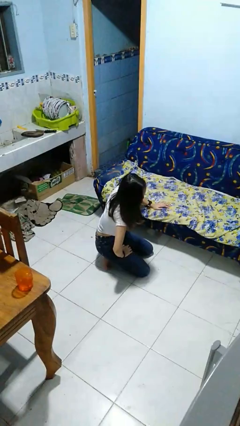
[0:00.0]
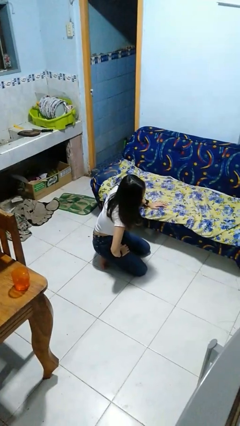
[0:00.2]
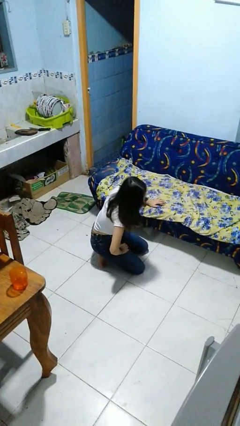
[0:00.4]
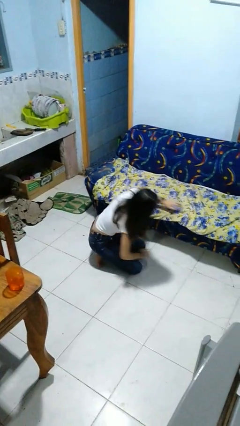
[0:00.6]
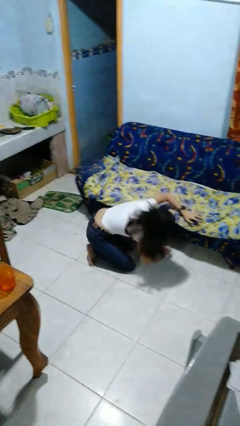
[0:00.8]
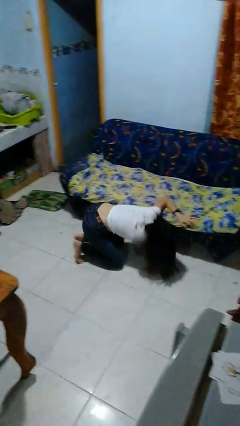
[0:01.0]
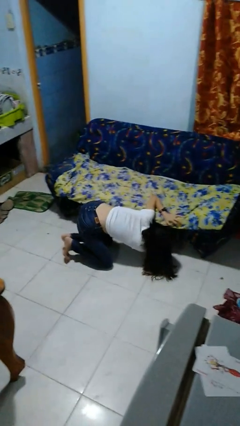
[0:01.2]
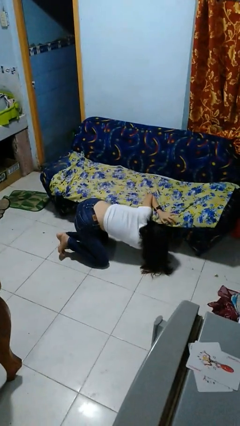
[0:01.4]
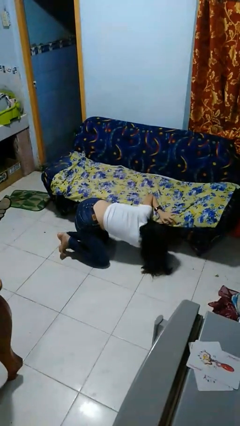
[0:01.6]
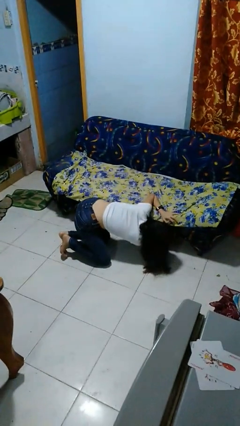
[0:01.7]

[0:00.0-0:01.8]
person searches under couch

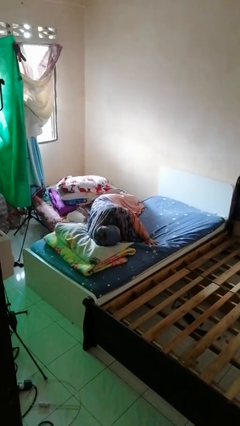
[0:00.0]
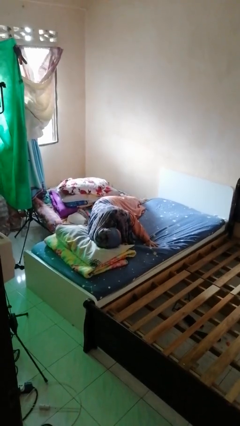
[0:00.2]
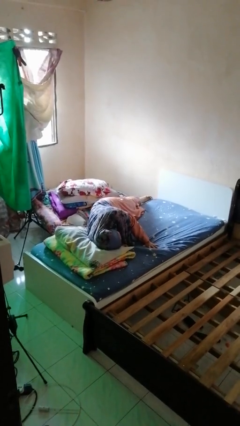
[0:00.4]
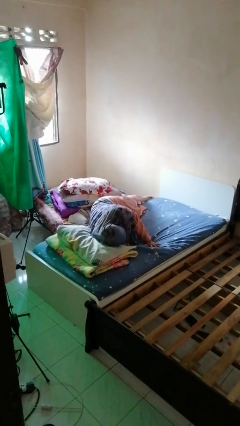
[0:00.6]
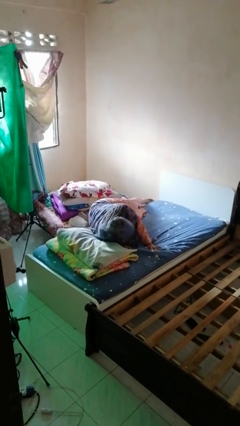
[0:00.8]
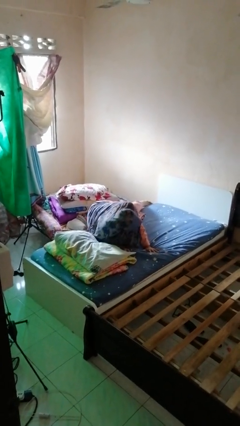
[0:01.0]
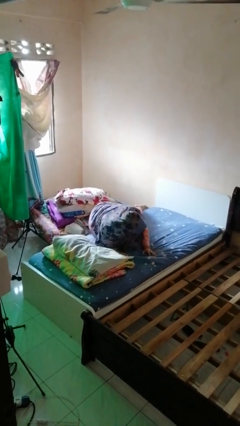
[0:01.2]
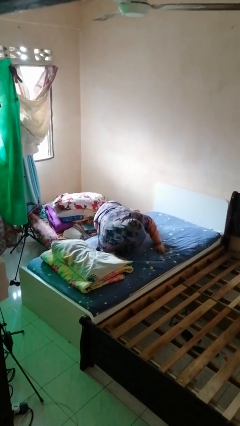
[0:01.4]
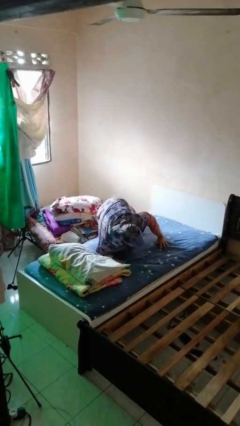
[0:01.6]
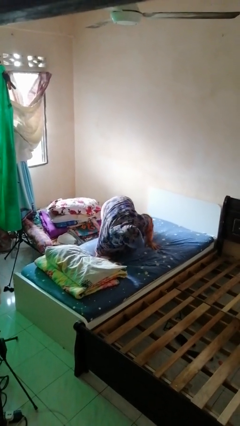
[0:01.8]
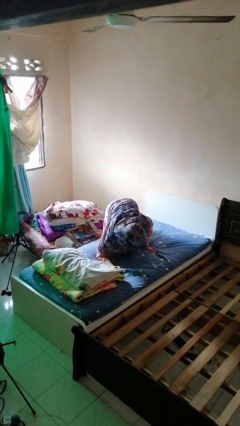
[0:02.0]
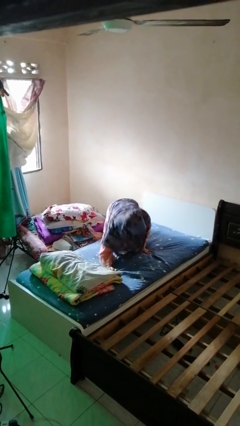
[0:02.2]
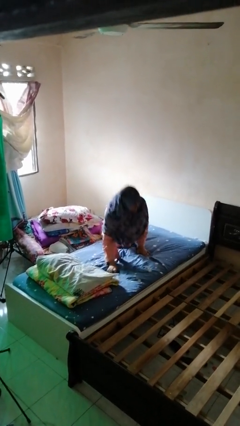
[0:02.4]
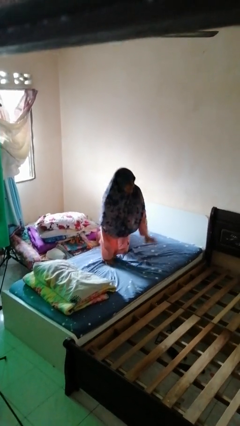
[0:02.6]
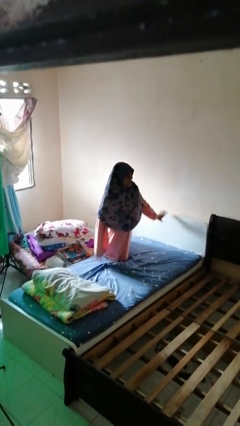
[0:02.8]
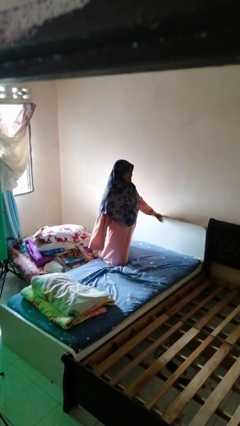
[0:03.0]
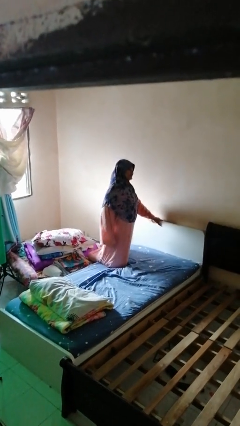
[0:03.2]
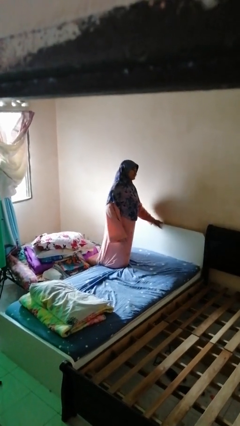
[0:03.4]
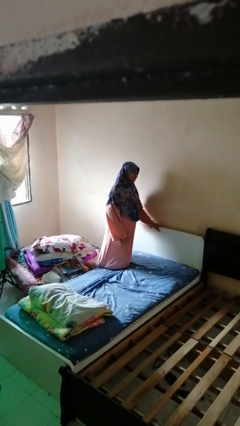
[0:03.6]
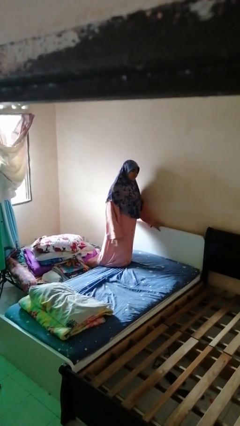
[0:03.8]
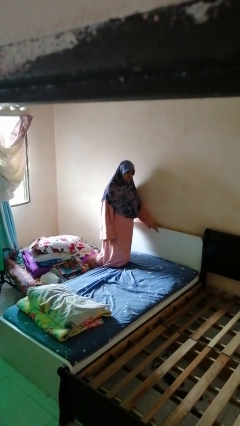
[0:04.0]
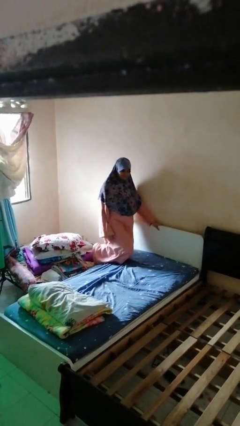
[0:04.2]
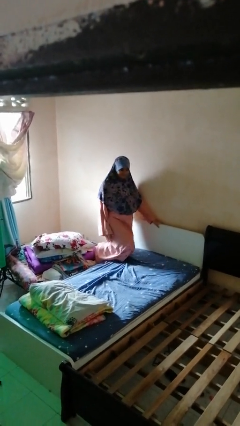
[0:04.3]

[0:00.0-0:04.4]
person stands up

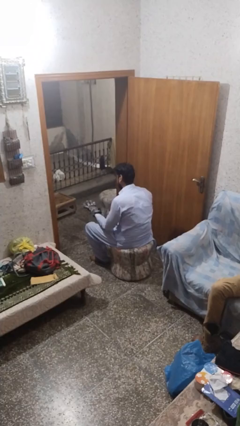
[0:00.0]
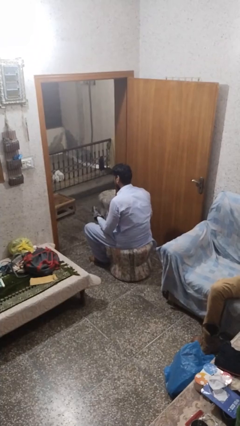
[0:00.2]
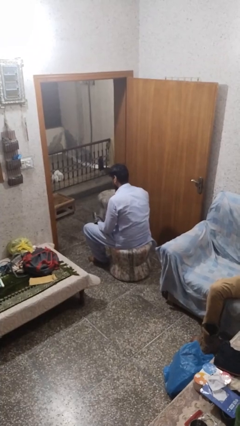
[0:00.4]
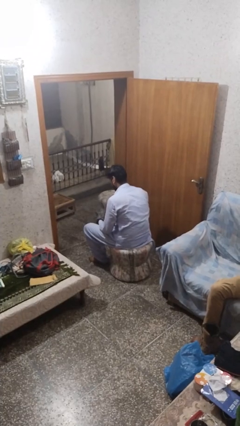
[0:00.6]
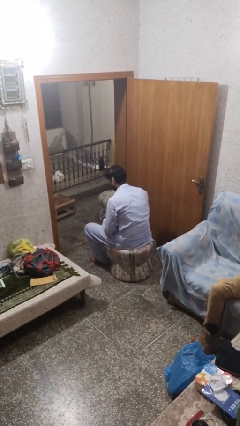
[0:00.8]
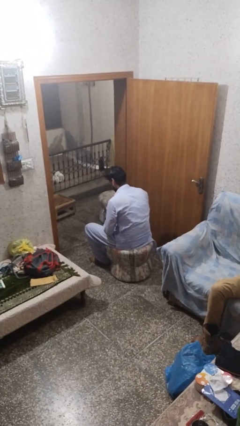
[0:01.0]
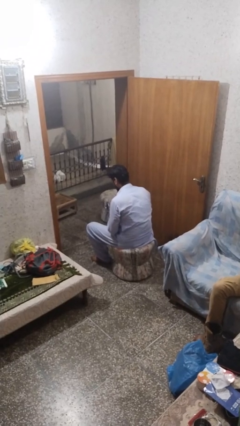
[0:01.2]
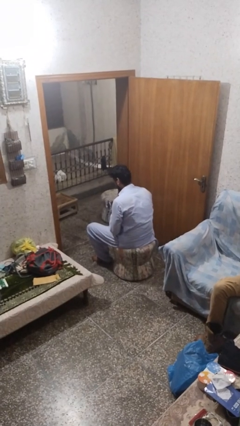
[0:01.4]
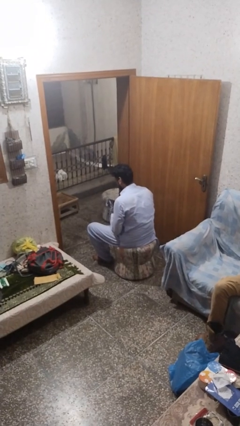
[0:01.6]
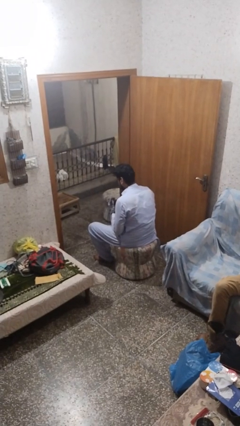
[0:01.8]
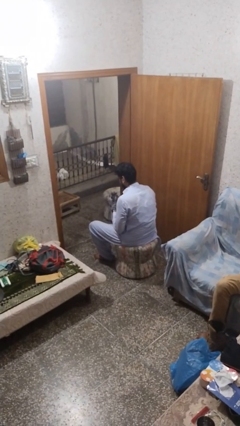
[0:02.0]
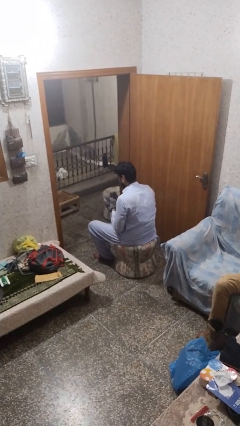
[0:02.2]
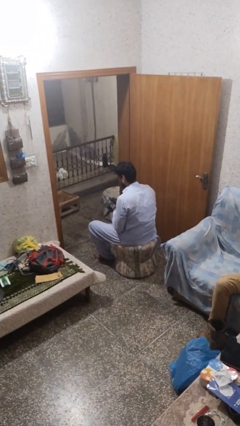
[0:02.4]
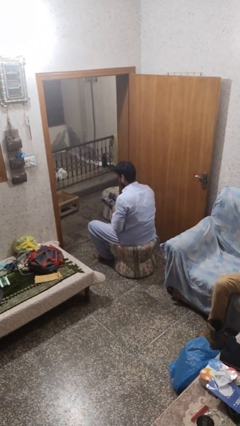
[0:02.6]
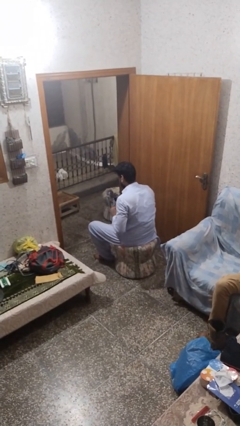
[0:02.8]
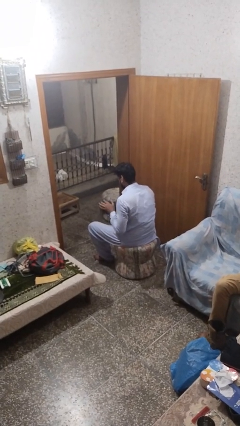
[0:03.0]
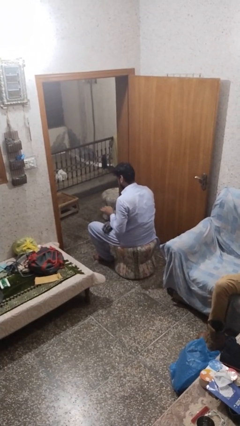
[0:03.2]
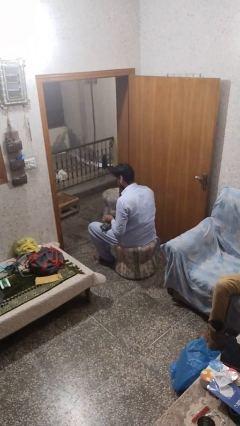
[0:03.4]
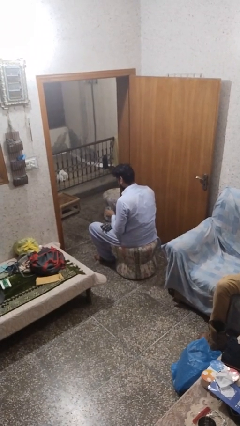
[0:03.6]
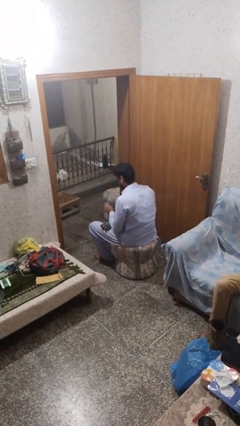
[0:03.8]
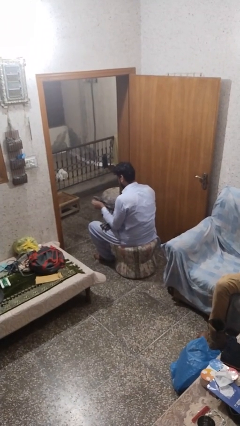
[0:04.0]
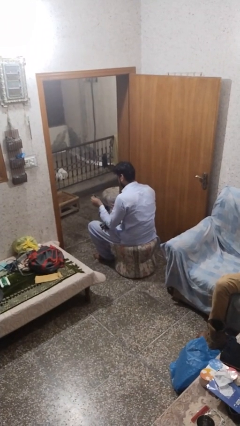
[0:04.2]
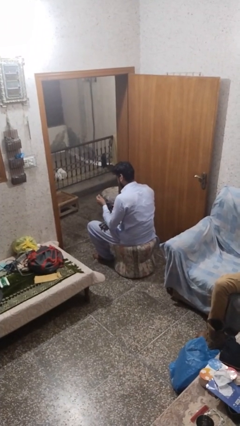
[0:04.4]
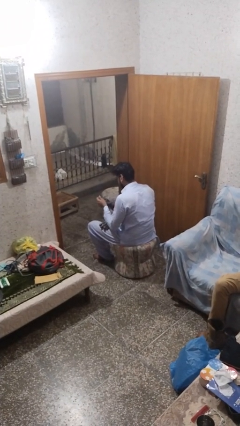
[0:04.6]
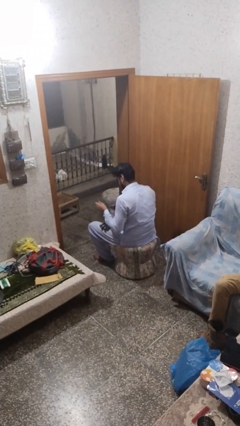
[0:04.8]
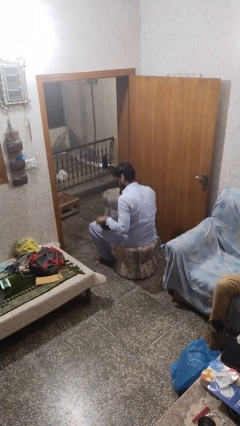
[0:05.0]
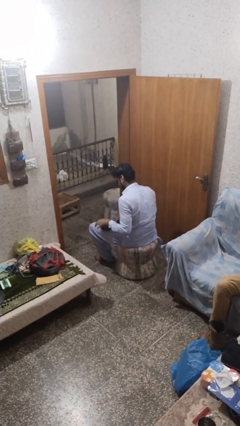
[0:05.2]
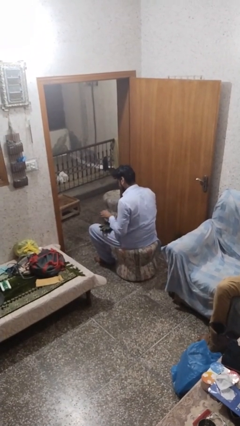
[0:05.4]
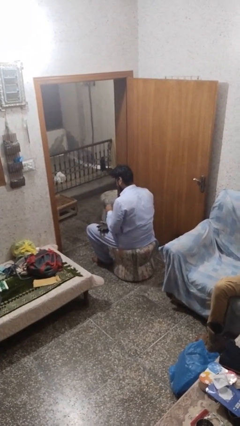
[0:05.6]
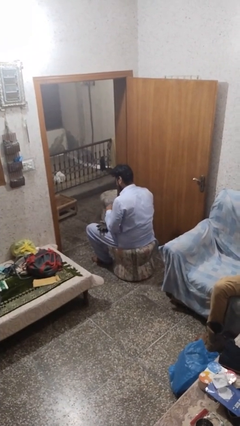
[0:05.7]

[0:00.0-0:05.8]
person takes off gloves

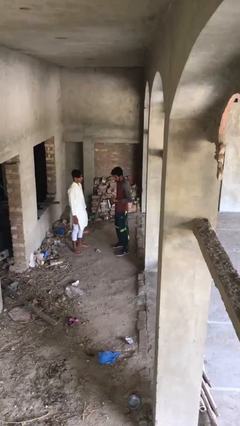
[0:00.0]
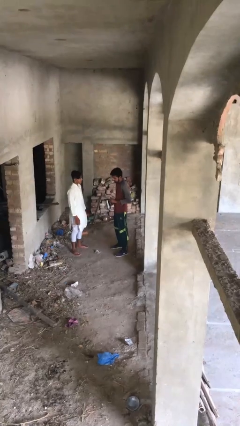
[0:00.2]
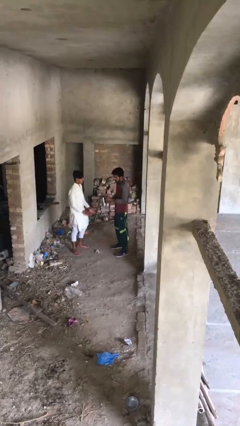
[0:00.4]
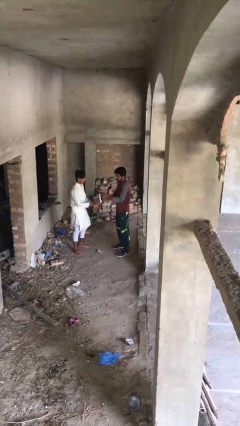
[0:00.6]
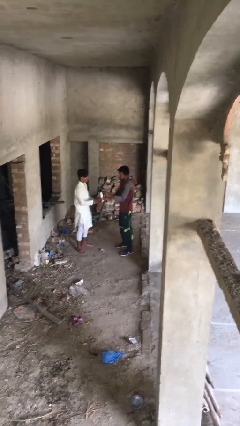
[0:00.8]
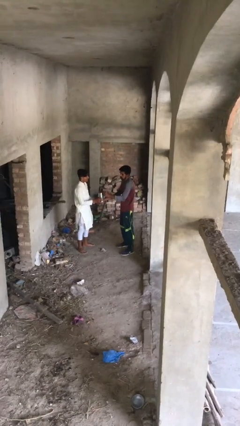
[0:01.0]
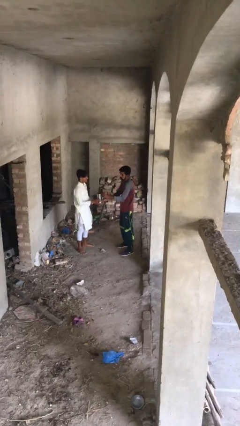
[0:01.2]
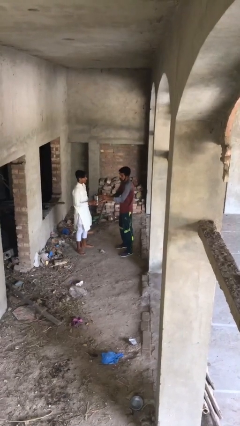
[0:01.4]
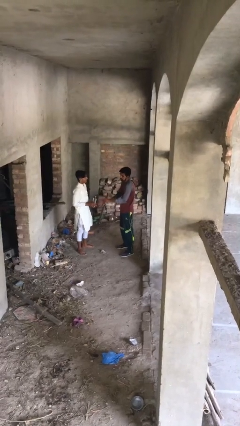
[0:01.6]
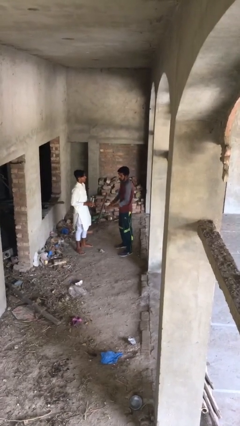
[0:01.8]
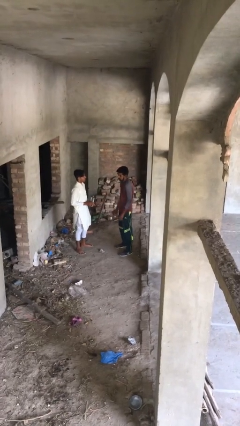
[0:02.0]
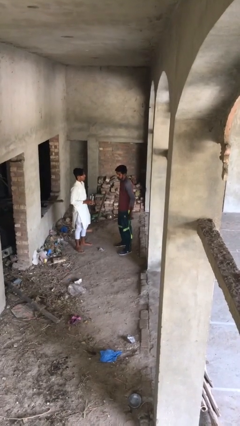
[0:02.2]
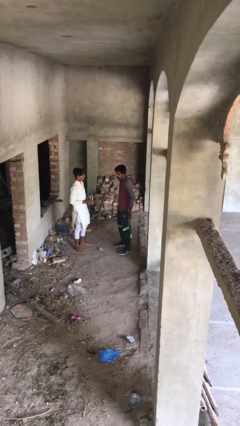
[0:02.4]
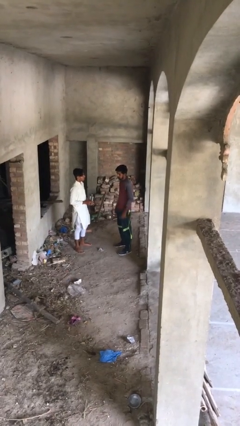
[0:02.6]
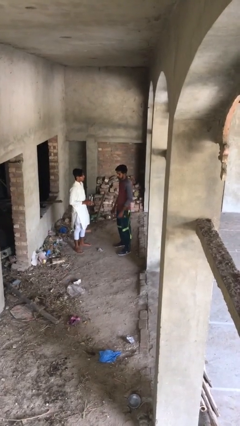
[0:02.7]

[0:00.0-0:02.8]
person transfers object to person

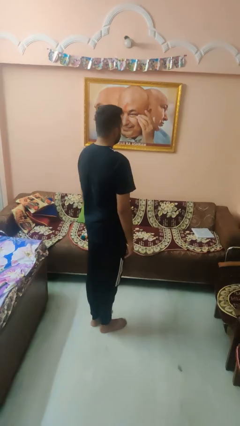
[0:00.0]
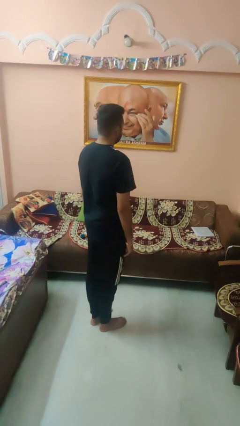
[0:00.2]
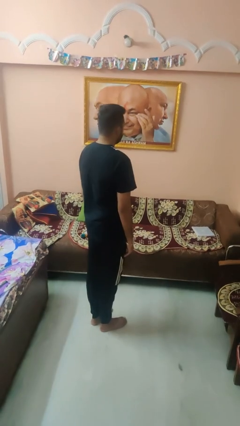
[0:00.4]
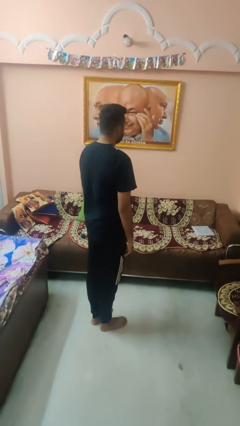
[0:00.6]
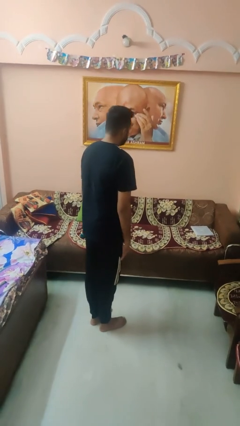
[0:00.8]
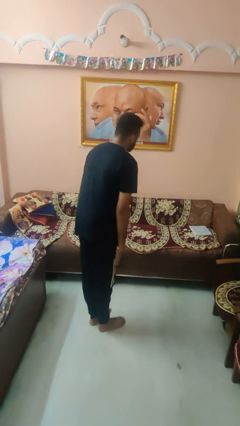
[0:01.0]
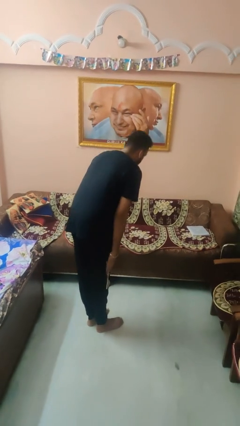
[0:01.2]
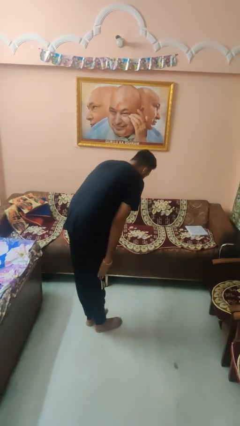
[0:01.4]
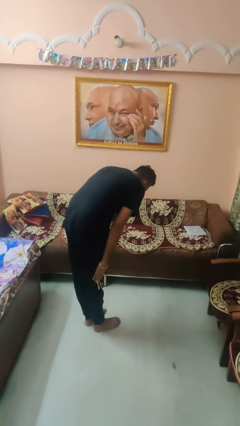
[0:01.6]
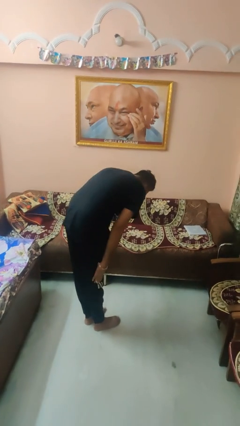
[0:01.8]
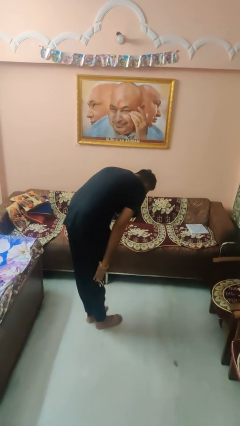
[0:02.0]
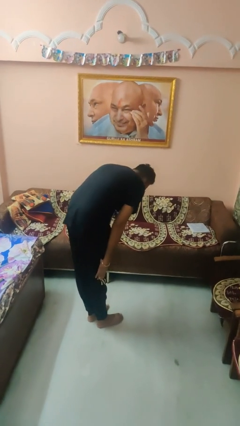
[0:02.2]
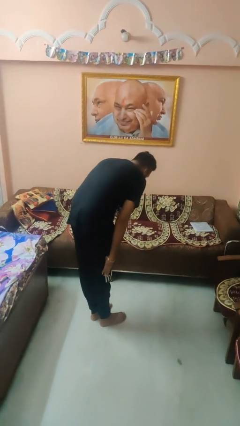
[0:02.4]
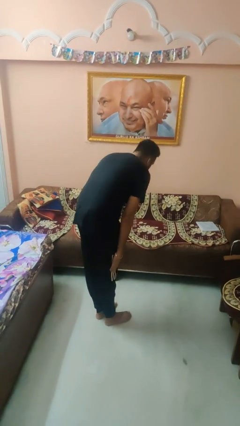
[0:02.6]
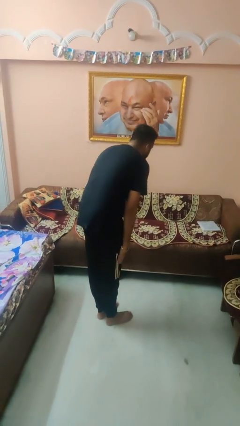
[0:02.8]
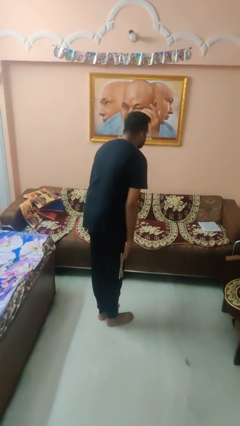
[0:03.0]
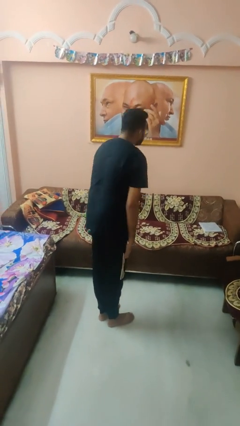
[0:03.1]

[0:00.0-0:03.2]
person bows
